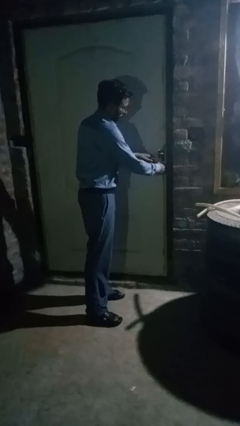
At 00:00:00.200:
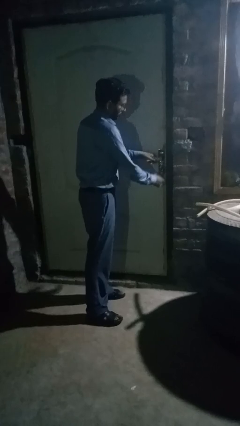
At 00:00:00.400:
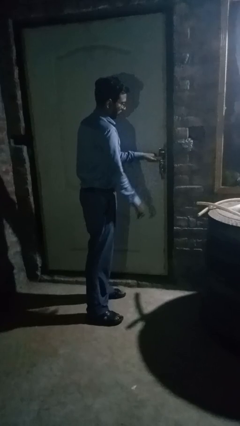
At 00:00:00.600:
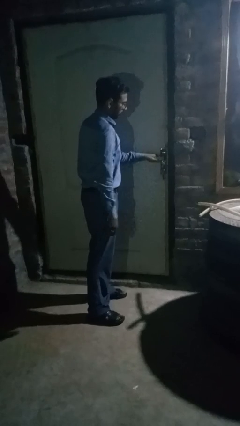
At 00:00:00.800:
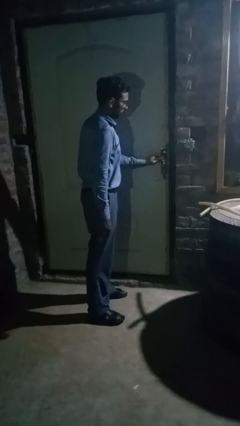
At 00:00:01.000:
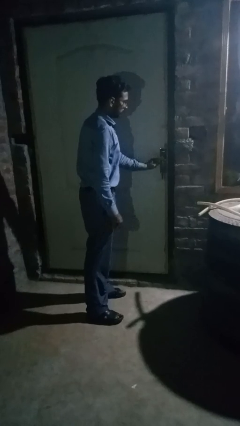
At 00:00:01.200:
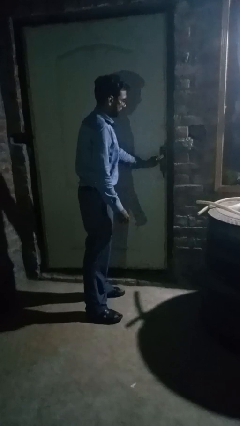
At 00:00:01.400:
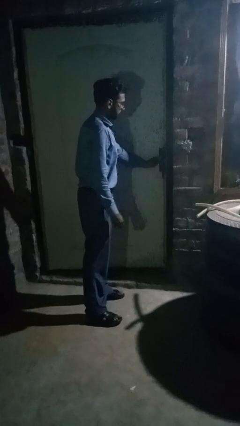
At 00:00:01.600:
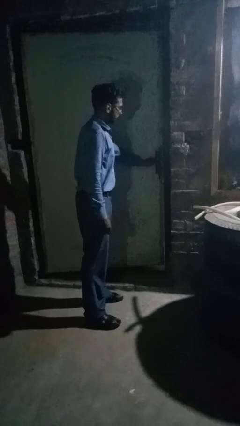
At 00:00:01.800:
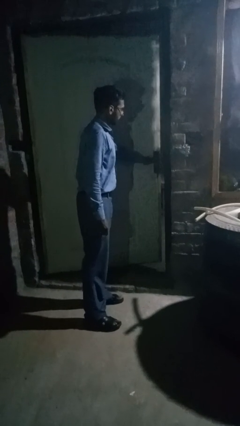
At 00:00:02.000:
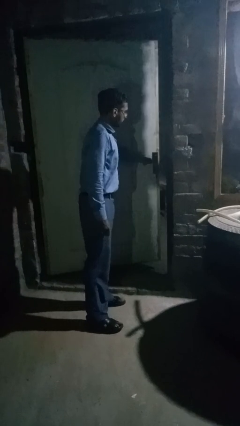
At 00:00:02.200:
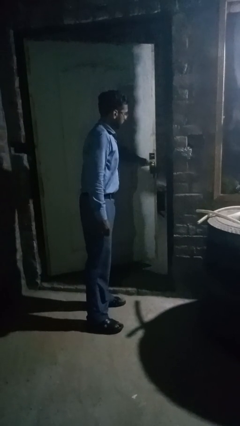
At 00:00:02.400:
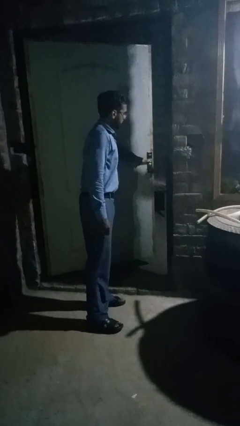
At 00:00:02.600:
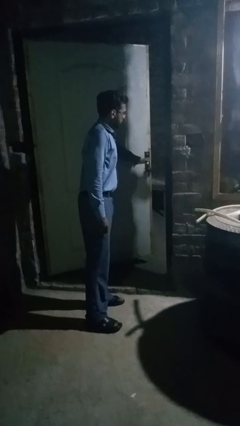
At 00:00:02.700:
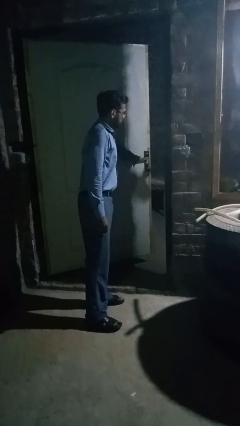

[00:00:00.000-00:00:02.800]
person opens facility door

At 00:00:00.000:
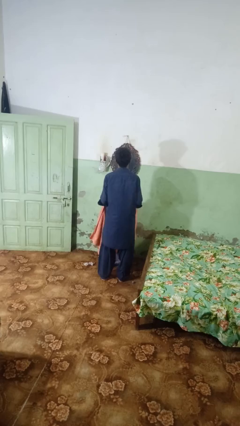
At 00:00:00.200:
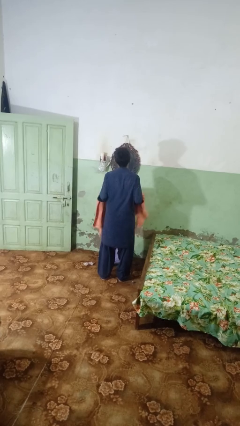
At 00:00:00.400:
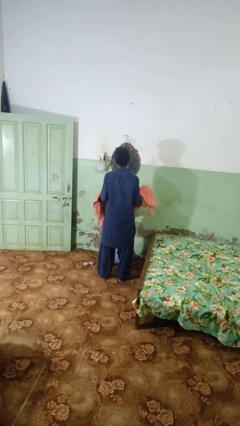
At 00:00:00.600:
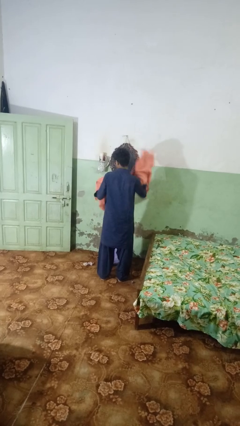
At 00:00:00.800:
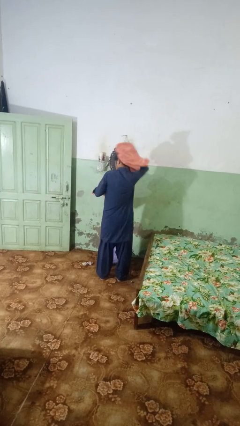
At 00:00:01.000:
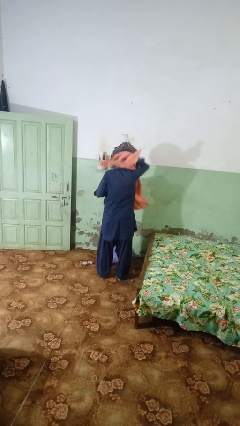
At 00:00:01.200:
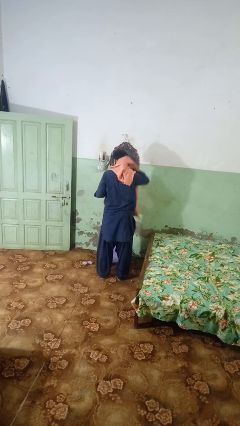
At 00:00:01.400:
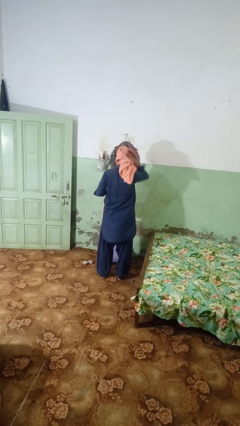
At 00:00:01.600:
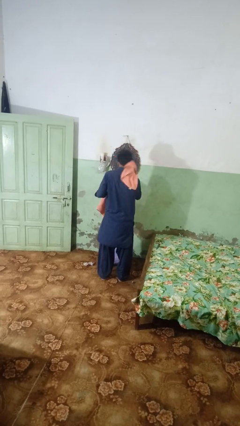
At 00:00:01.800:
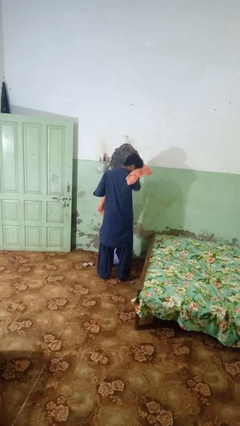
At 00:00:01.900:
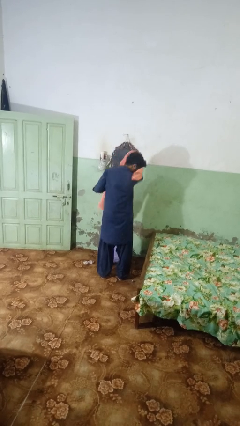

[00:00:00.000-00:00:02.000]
person dries hair with towel

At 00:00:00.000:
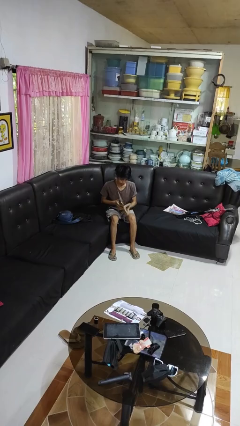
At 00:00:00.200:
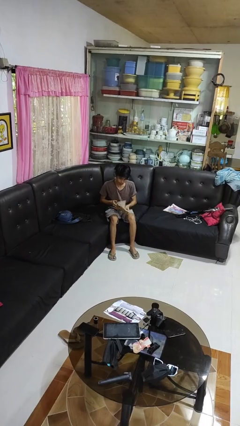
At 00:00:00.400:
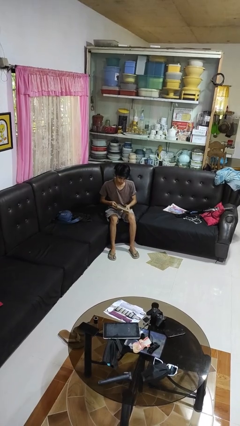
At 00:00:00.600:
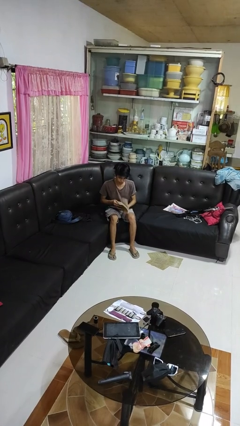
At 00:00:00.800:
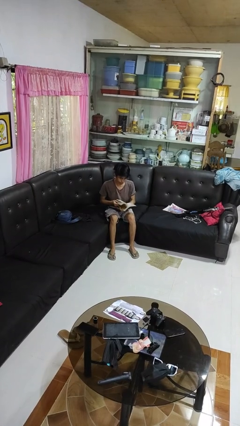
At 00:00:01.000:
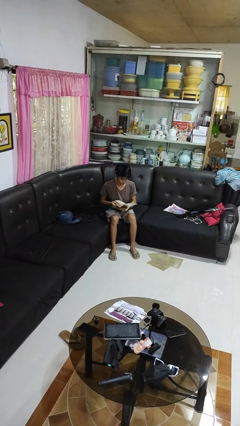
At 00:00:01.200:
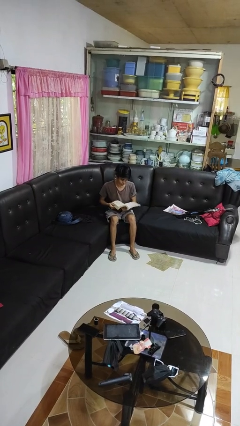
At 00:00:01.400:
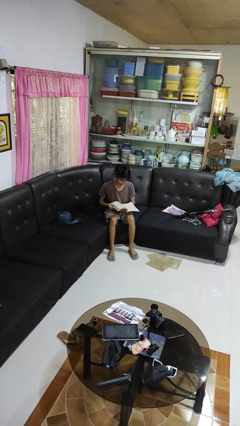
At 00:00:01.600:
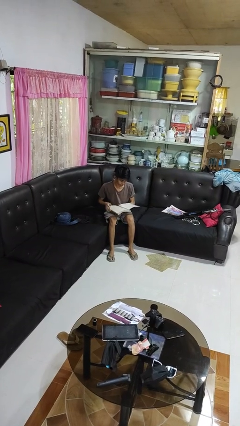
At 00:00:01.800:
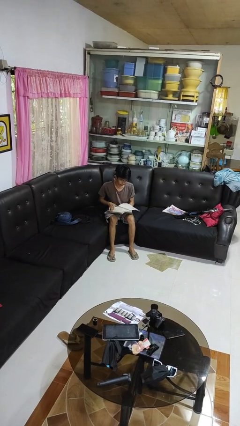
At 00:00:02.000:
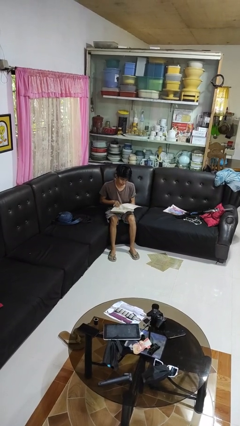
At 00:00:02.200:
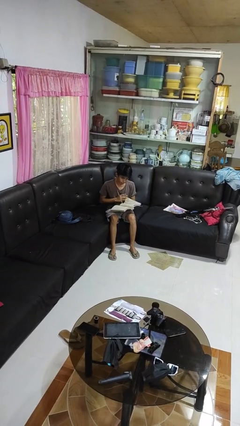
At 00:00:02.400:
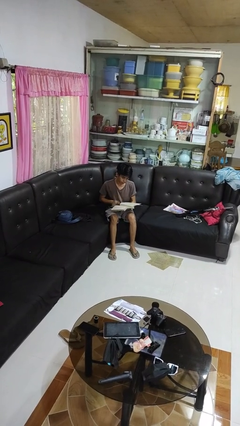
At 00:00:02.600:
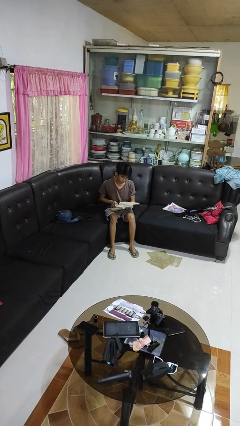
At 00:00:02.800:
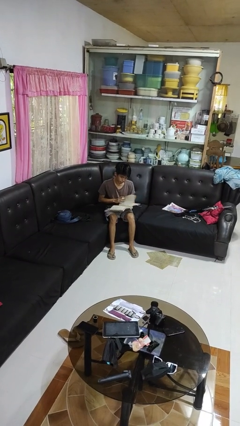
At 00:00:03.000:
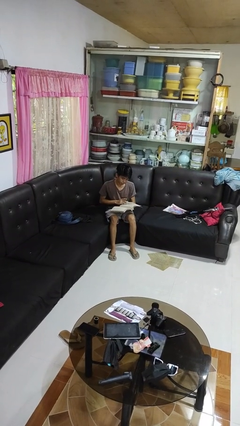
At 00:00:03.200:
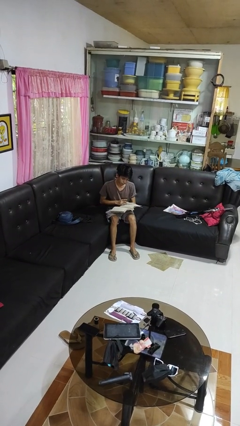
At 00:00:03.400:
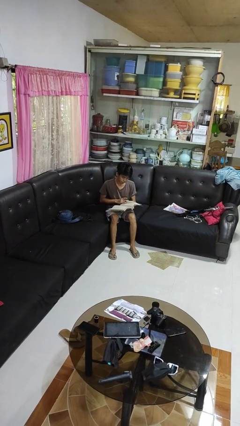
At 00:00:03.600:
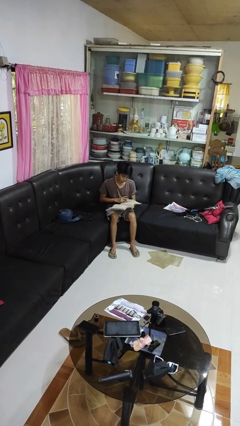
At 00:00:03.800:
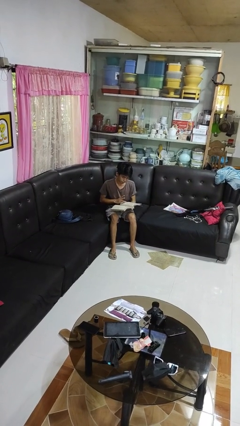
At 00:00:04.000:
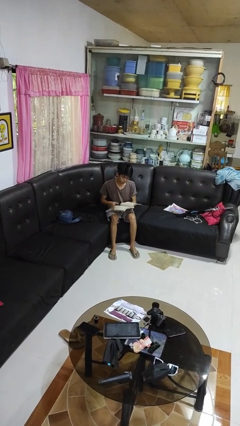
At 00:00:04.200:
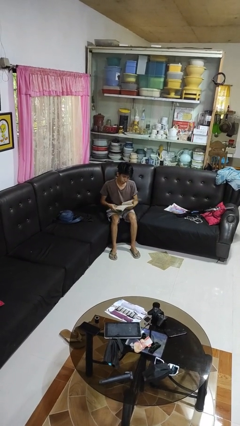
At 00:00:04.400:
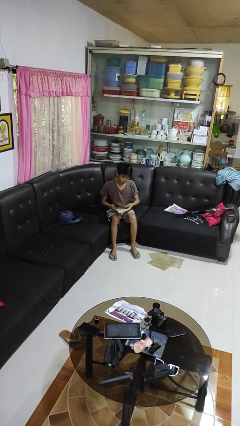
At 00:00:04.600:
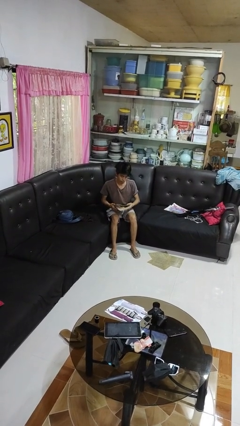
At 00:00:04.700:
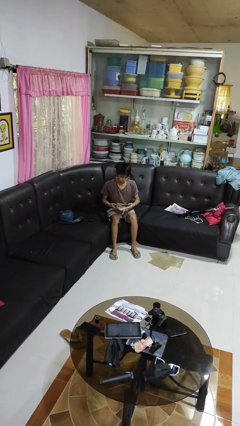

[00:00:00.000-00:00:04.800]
person reads book

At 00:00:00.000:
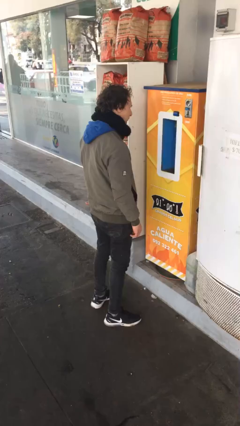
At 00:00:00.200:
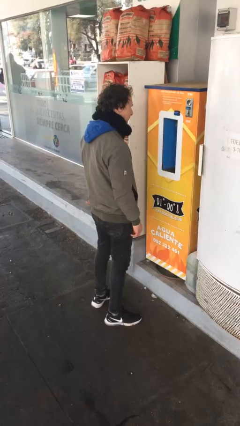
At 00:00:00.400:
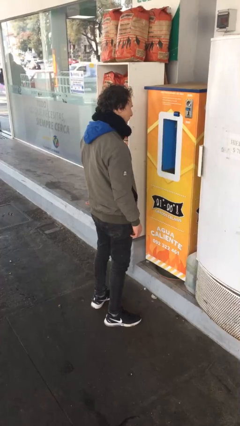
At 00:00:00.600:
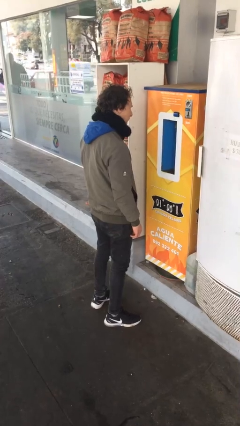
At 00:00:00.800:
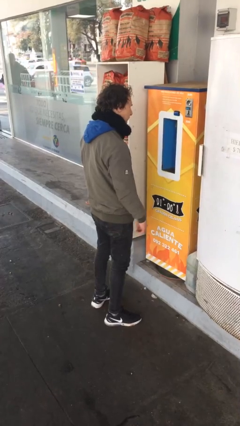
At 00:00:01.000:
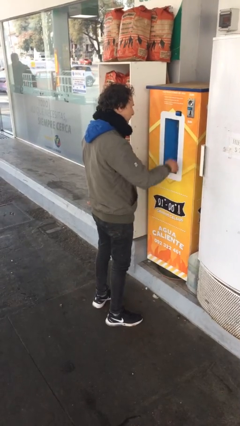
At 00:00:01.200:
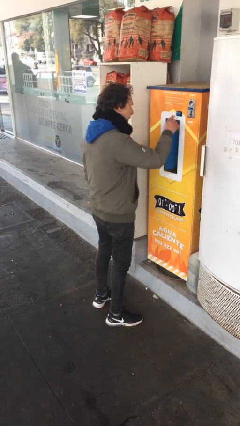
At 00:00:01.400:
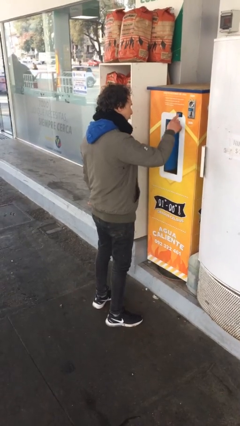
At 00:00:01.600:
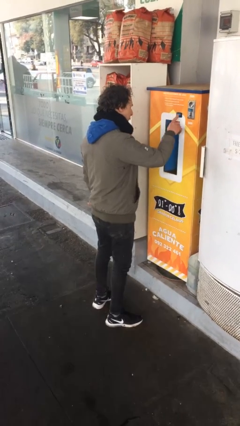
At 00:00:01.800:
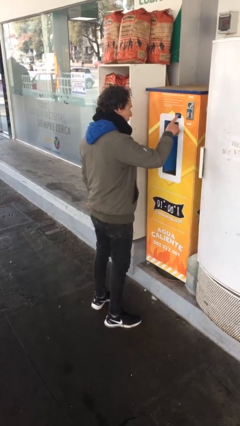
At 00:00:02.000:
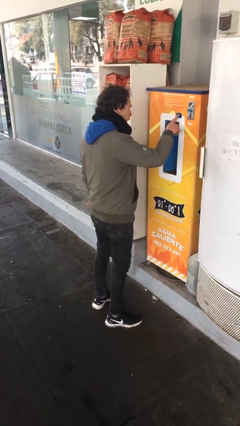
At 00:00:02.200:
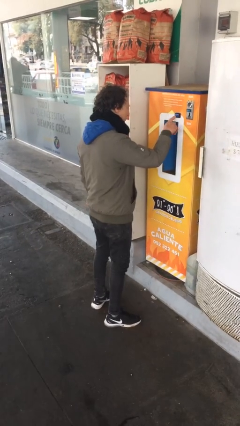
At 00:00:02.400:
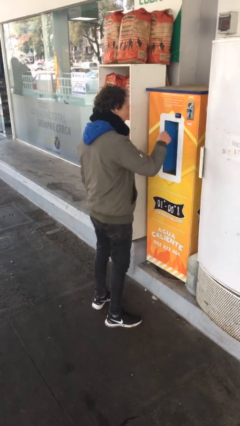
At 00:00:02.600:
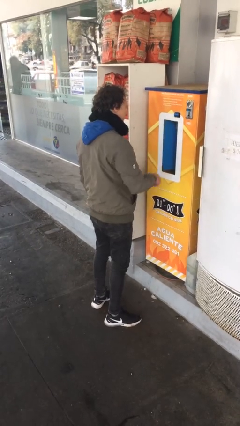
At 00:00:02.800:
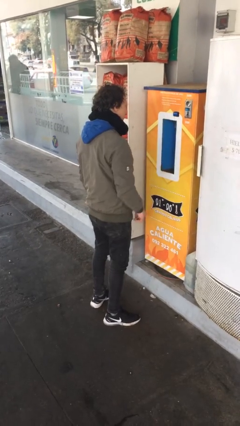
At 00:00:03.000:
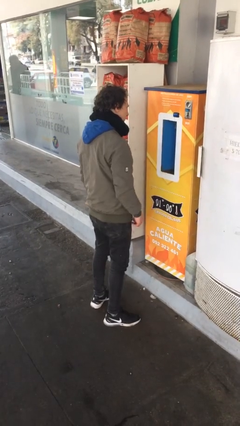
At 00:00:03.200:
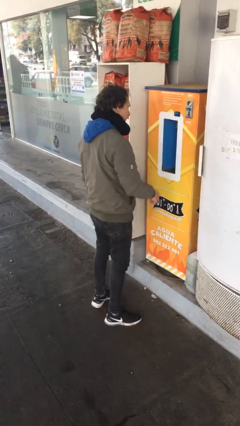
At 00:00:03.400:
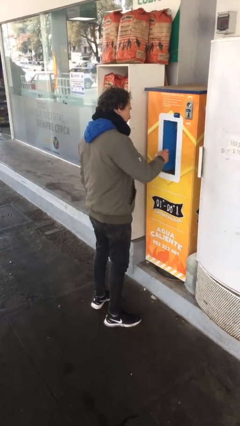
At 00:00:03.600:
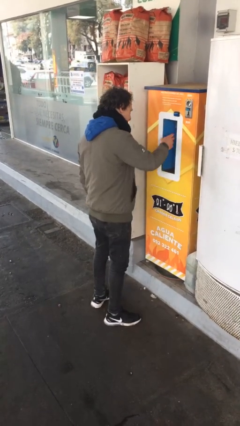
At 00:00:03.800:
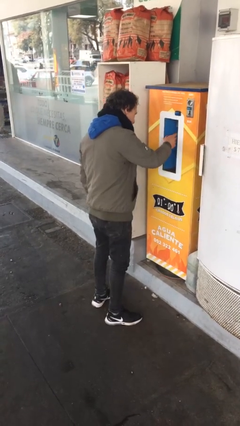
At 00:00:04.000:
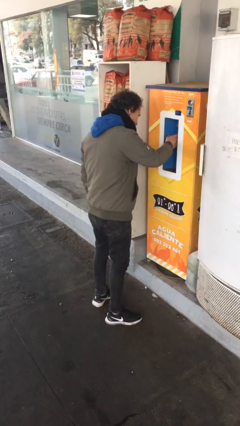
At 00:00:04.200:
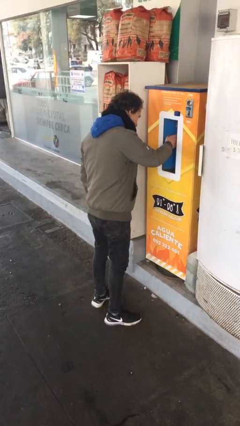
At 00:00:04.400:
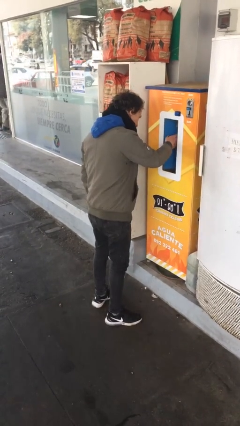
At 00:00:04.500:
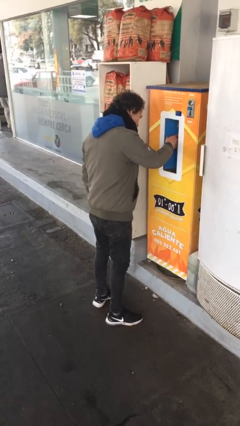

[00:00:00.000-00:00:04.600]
person purchases from machine

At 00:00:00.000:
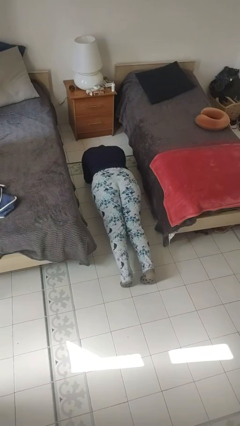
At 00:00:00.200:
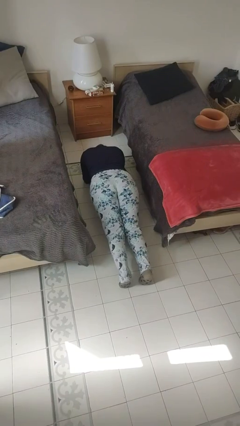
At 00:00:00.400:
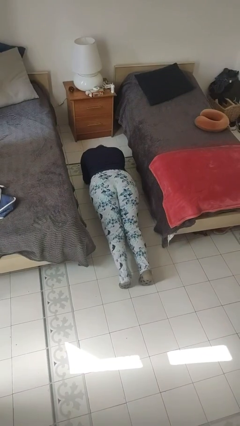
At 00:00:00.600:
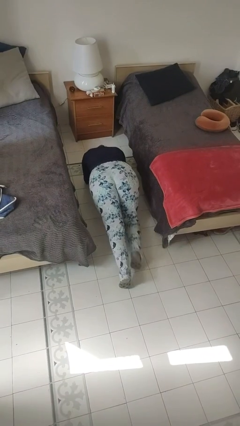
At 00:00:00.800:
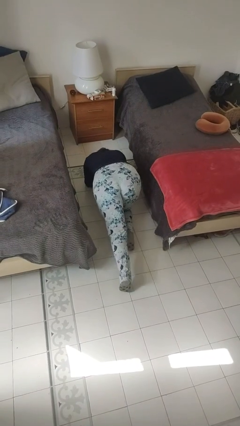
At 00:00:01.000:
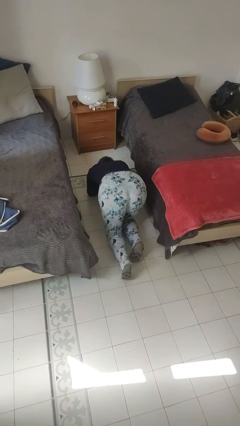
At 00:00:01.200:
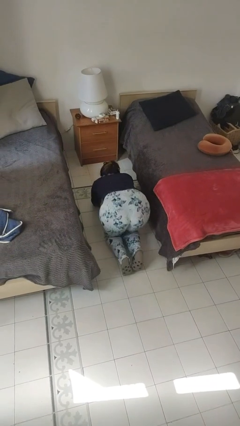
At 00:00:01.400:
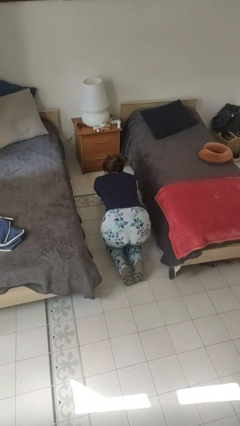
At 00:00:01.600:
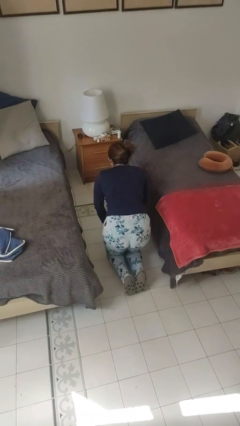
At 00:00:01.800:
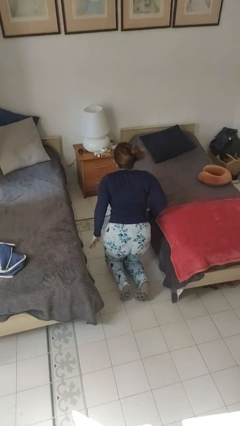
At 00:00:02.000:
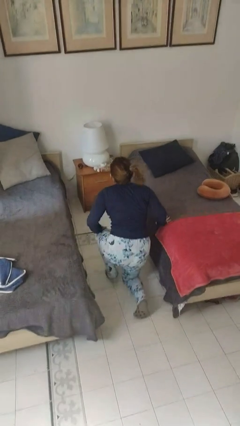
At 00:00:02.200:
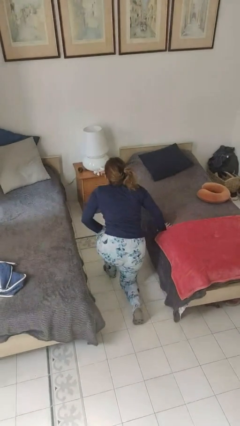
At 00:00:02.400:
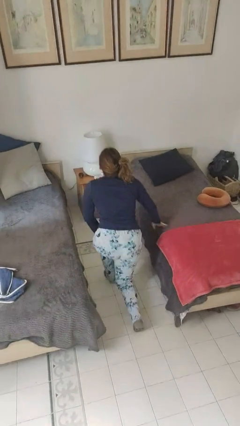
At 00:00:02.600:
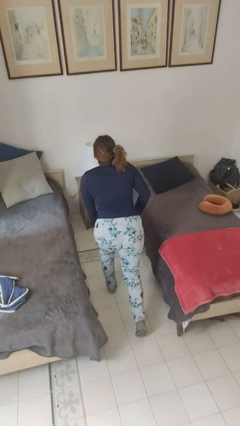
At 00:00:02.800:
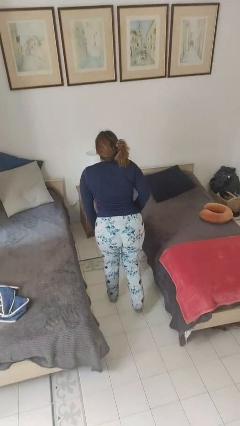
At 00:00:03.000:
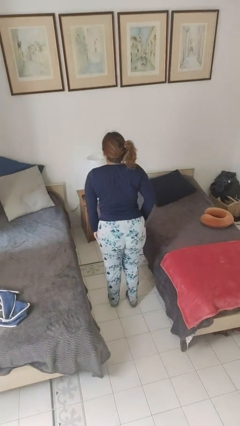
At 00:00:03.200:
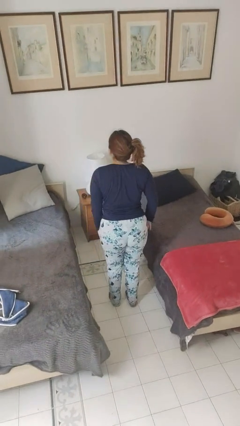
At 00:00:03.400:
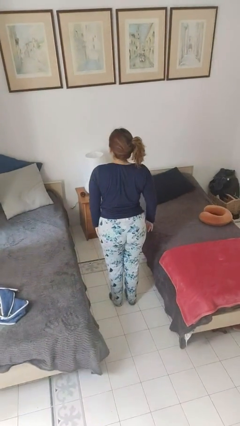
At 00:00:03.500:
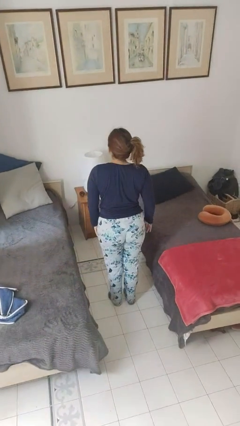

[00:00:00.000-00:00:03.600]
person stands up from floor
